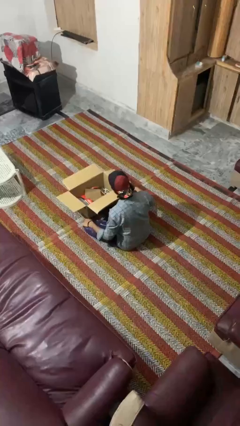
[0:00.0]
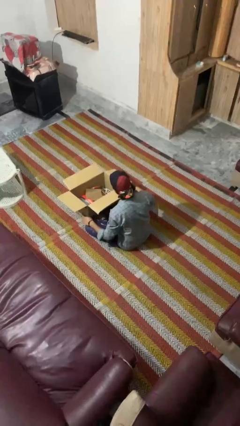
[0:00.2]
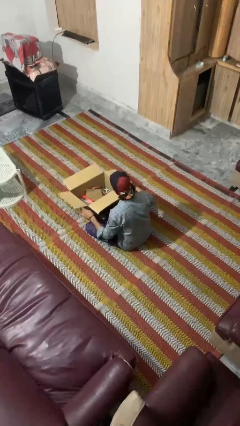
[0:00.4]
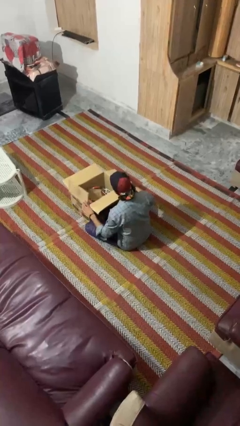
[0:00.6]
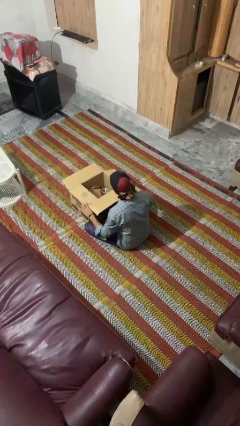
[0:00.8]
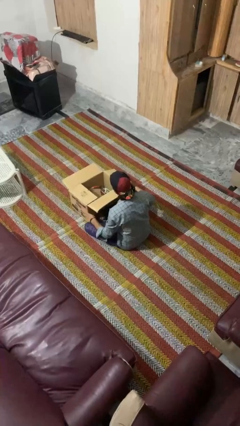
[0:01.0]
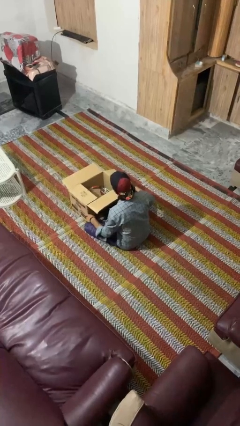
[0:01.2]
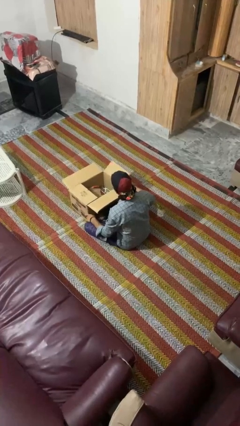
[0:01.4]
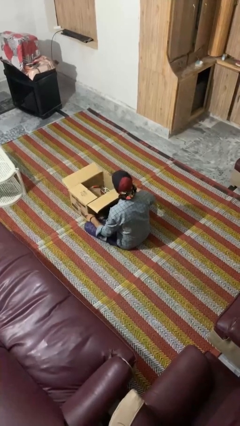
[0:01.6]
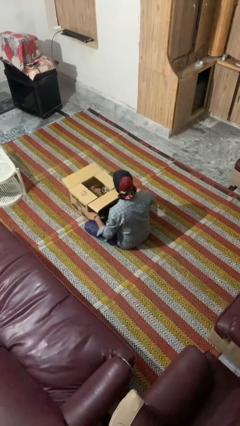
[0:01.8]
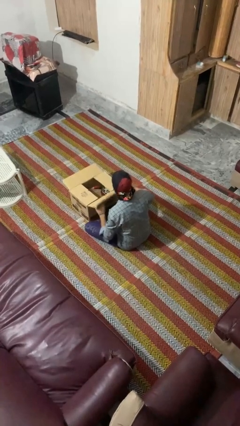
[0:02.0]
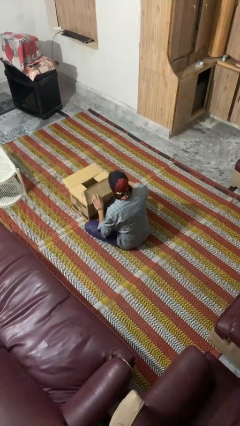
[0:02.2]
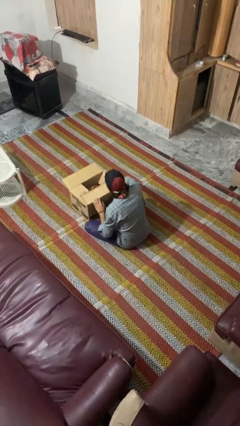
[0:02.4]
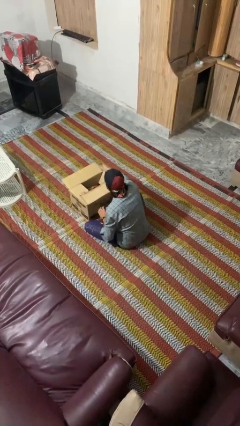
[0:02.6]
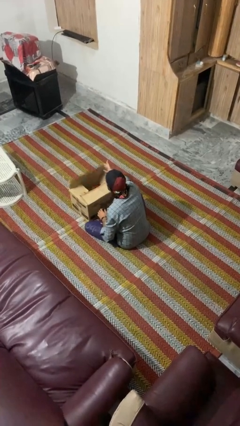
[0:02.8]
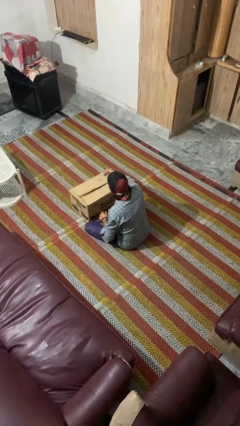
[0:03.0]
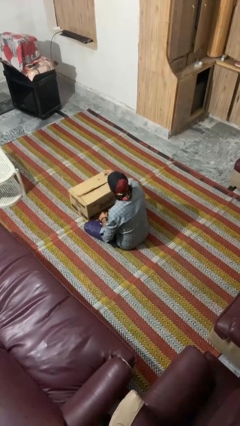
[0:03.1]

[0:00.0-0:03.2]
person closes box

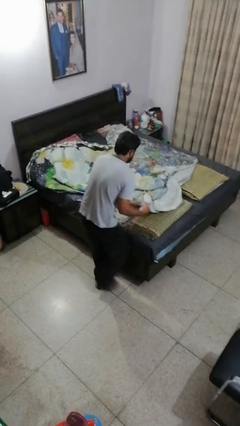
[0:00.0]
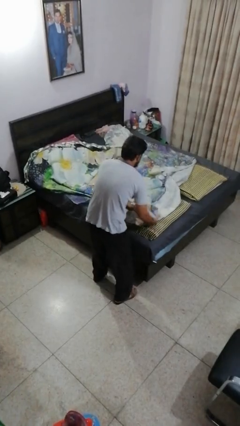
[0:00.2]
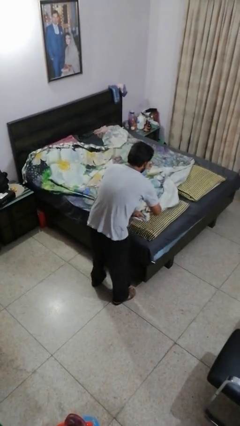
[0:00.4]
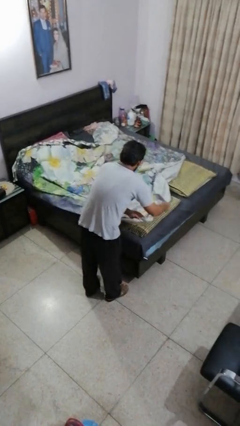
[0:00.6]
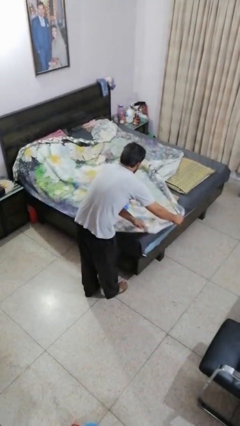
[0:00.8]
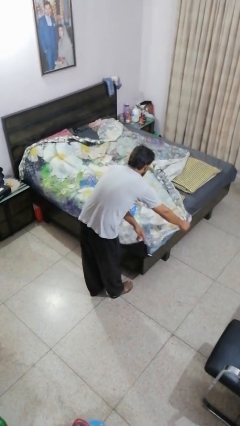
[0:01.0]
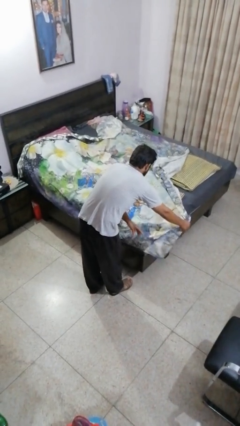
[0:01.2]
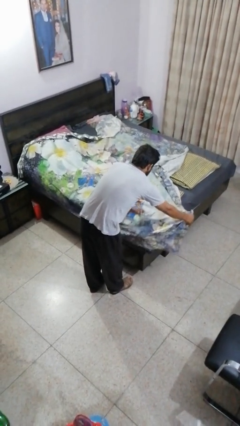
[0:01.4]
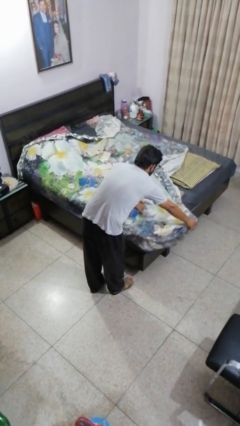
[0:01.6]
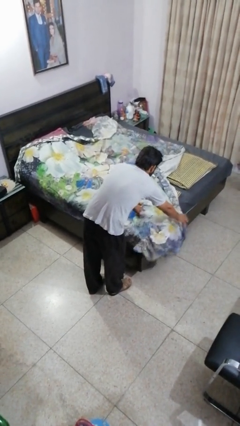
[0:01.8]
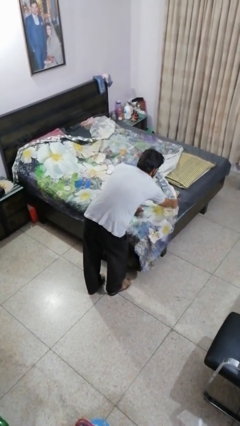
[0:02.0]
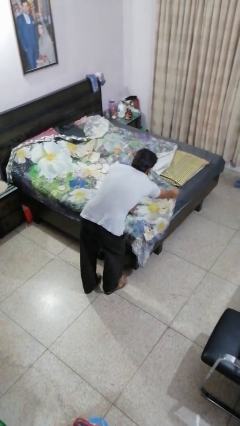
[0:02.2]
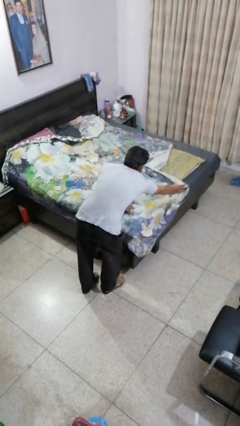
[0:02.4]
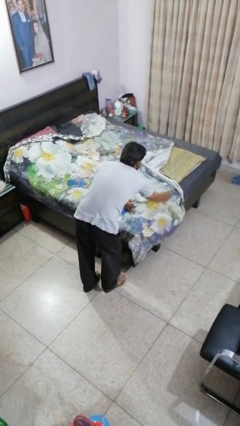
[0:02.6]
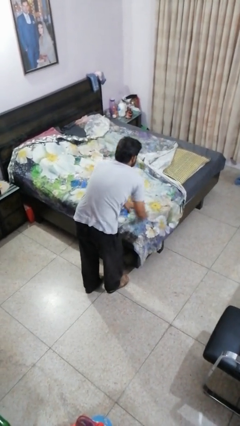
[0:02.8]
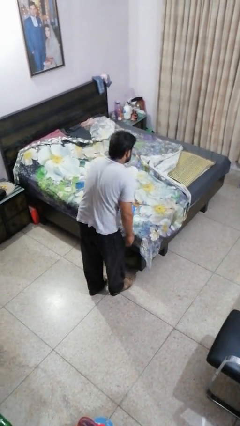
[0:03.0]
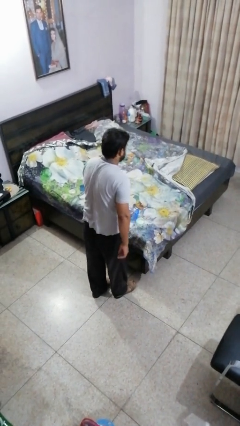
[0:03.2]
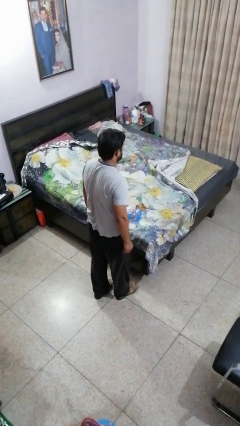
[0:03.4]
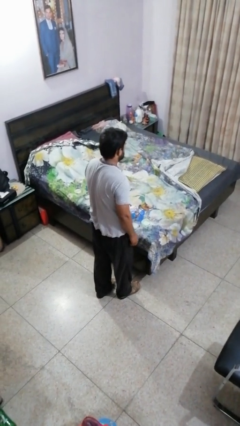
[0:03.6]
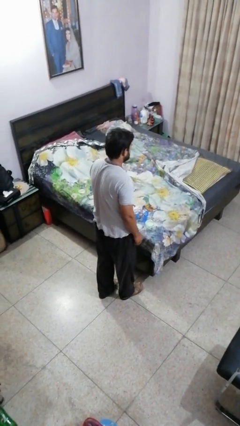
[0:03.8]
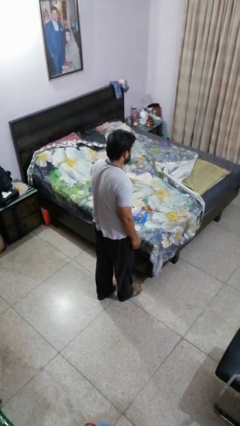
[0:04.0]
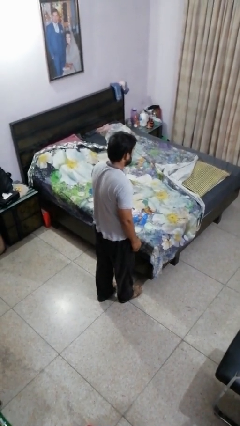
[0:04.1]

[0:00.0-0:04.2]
person makes bed

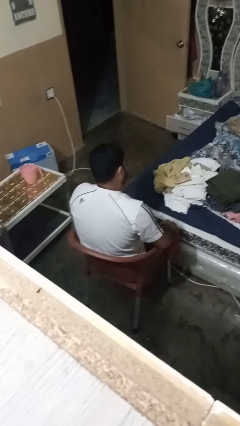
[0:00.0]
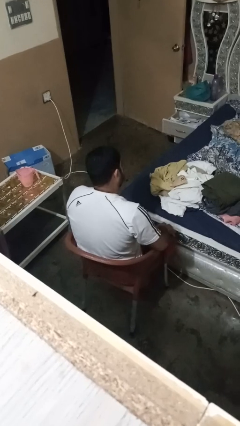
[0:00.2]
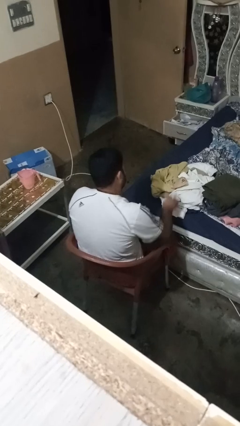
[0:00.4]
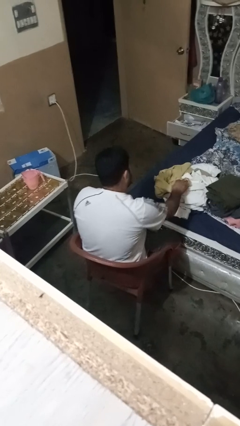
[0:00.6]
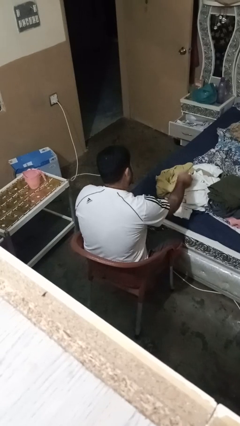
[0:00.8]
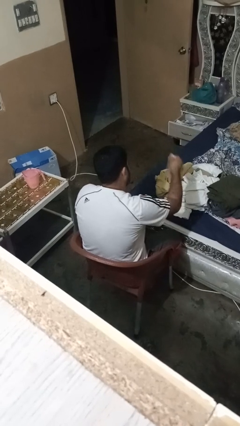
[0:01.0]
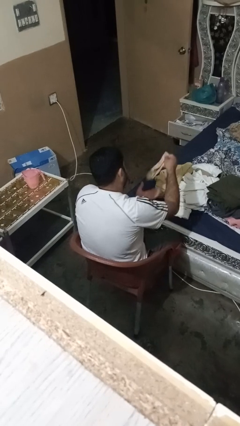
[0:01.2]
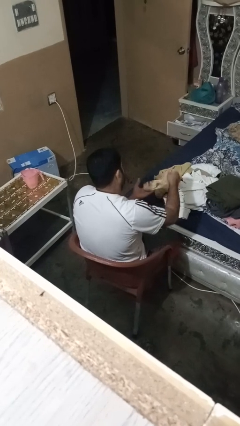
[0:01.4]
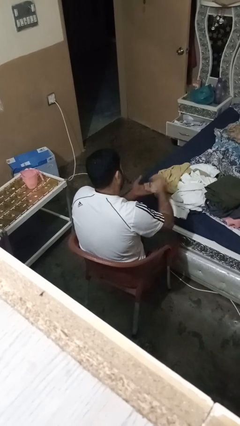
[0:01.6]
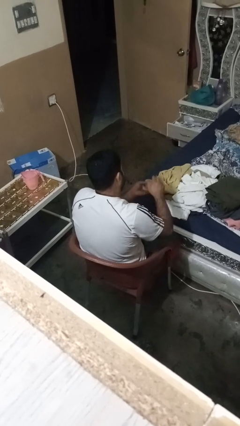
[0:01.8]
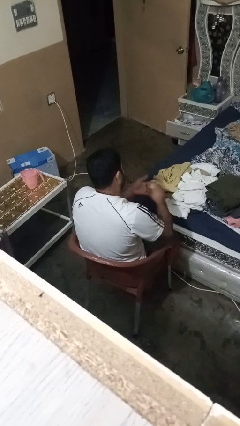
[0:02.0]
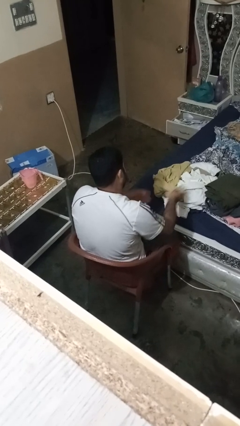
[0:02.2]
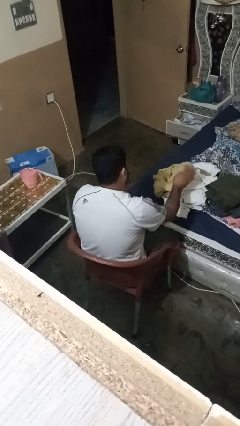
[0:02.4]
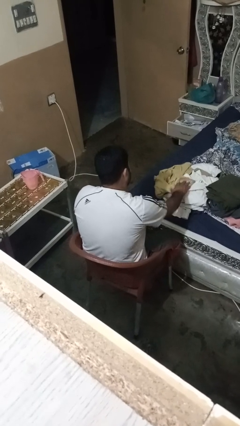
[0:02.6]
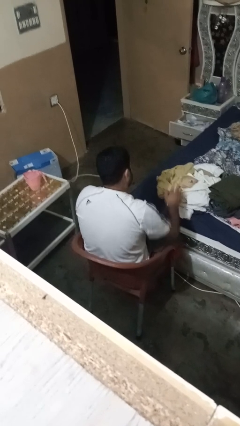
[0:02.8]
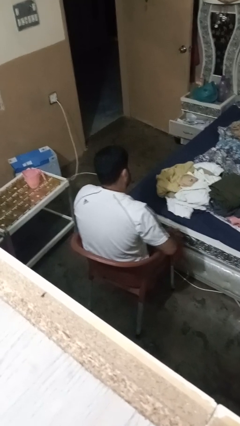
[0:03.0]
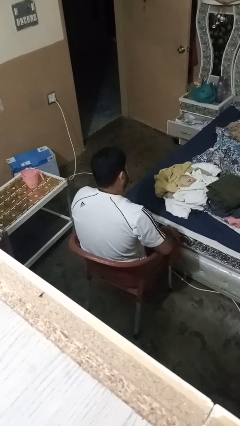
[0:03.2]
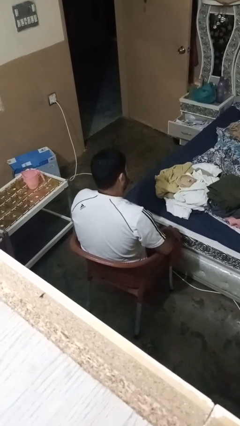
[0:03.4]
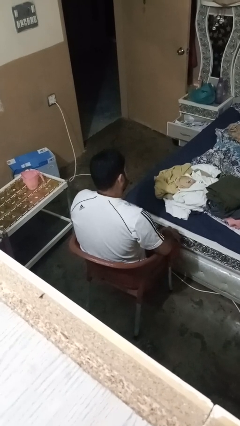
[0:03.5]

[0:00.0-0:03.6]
person folds socks

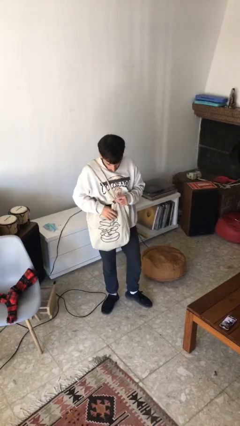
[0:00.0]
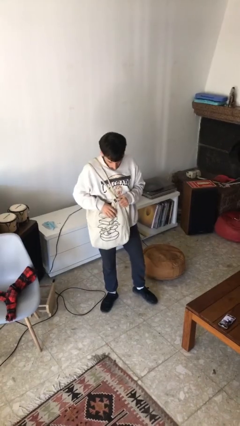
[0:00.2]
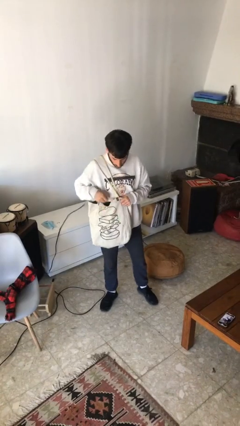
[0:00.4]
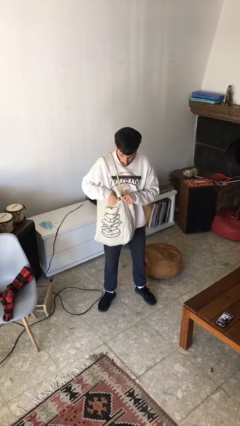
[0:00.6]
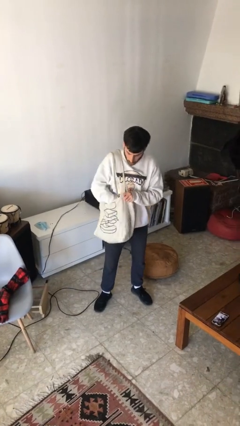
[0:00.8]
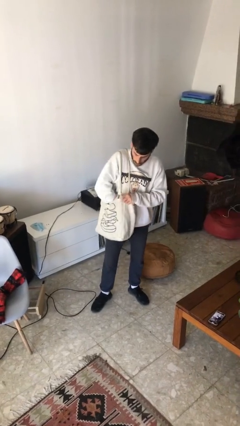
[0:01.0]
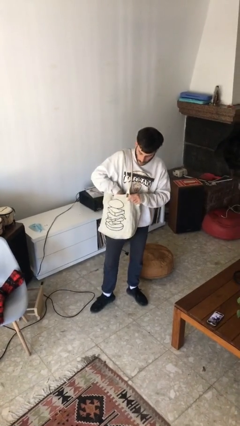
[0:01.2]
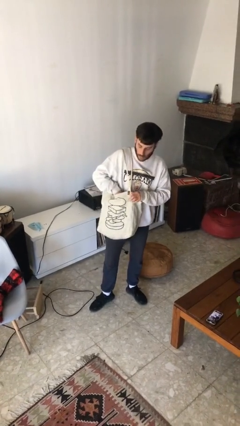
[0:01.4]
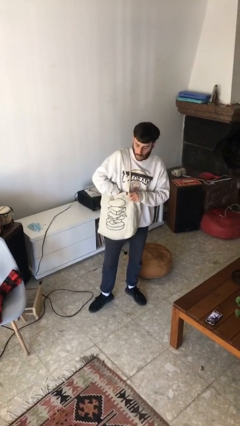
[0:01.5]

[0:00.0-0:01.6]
person searches in purse

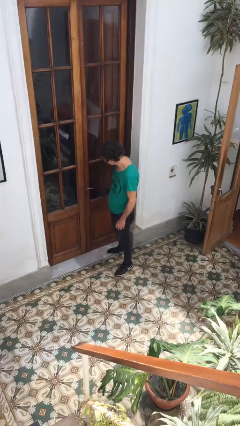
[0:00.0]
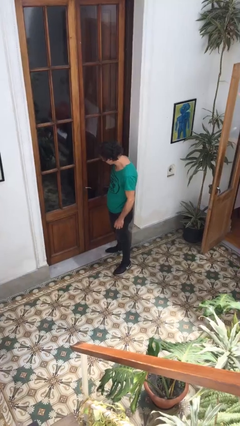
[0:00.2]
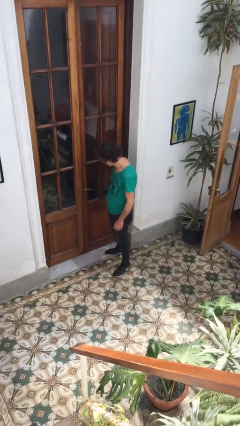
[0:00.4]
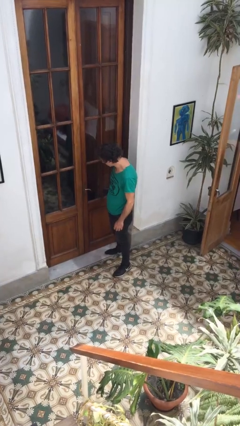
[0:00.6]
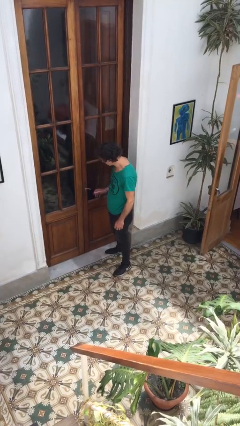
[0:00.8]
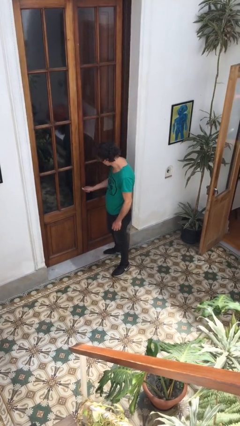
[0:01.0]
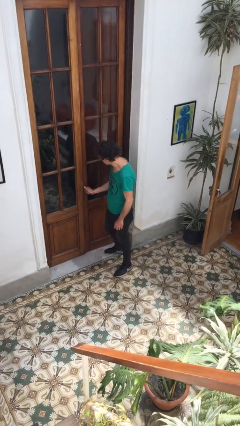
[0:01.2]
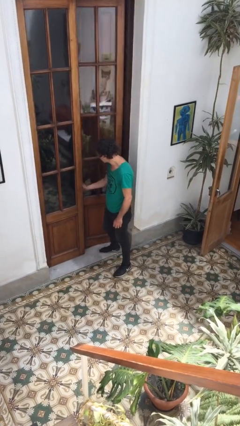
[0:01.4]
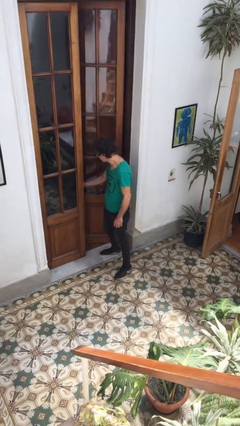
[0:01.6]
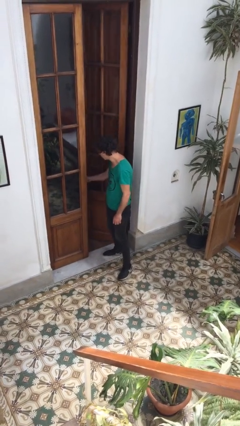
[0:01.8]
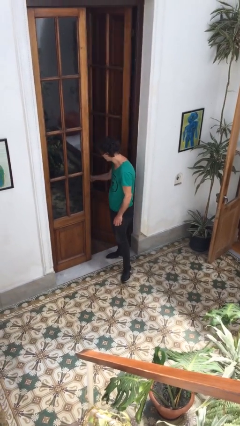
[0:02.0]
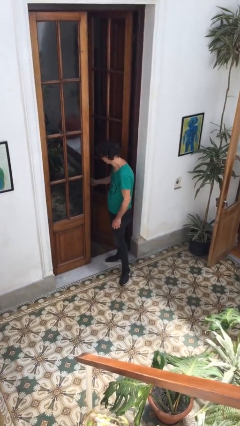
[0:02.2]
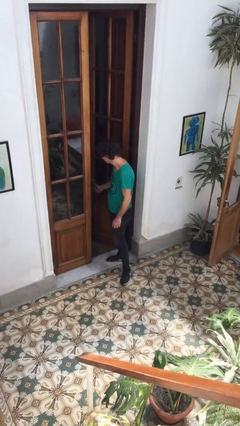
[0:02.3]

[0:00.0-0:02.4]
person opens facility door

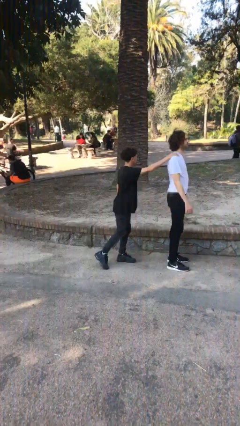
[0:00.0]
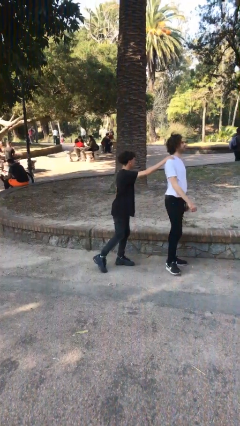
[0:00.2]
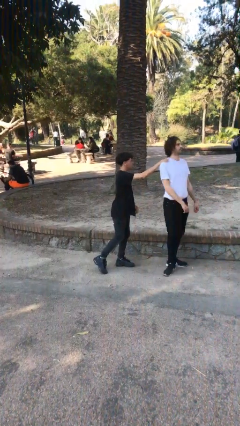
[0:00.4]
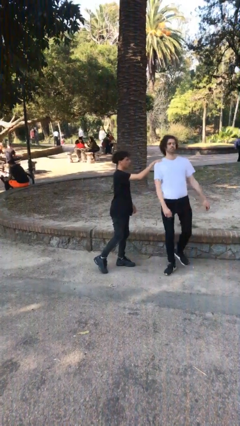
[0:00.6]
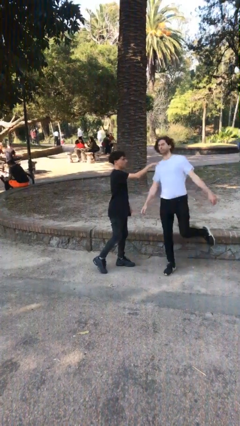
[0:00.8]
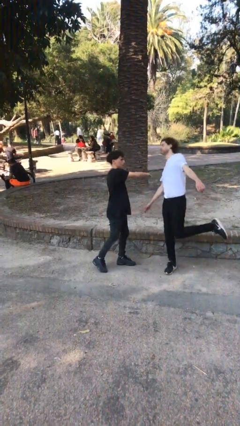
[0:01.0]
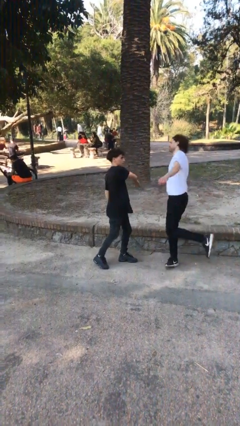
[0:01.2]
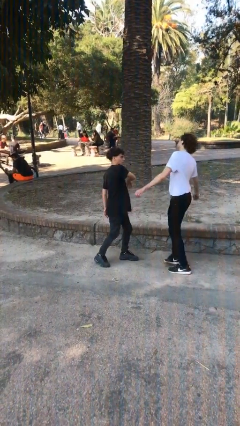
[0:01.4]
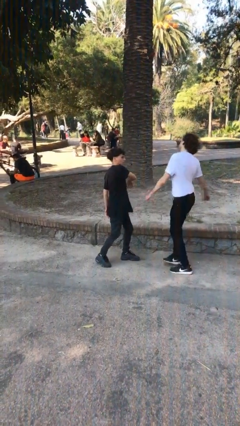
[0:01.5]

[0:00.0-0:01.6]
person spins person around

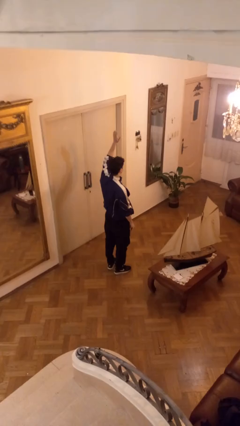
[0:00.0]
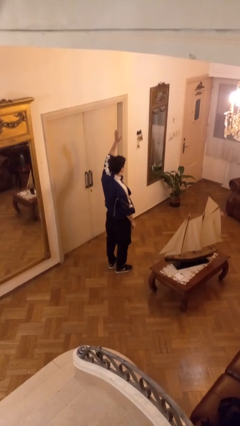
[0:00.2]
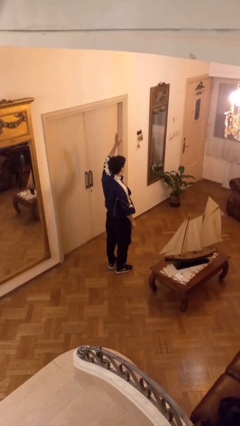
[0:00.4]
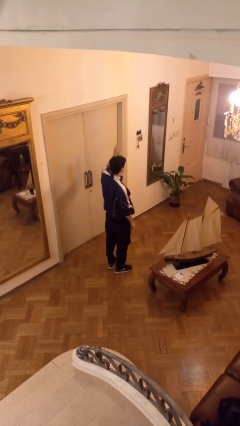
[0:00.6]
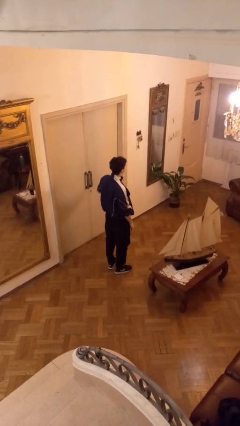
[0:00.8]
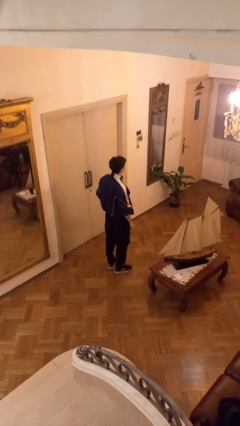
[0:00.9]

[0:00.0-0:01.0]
person gestures lower hand
